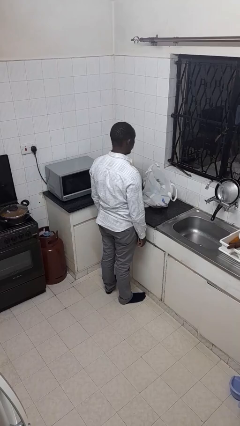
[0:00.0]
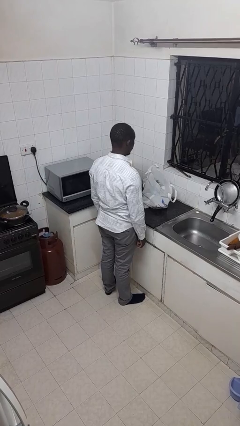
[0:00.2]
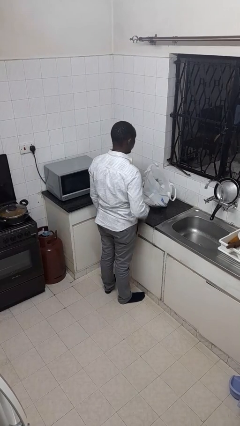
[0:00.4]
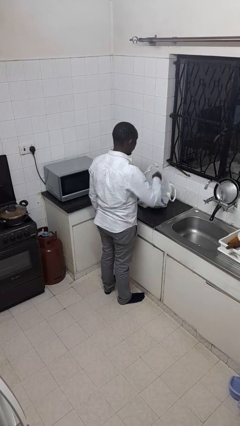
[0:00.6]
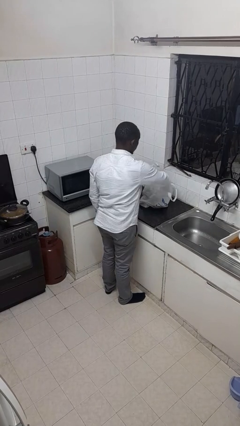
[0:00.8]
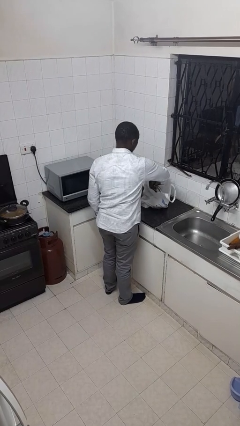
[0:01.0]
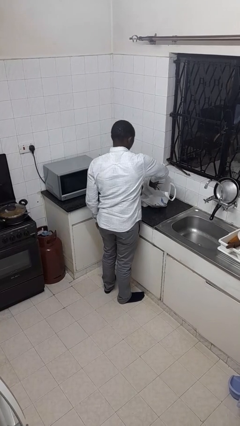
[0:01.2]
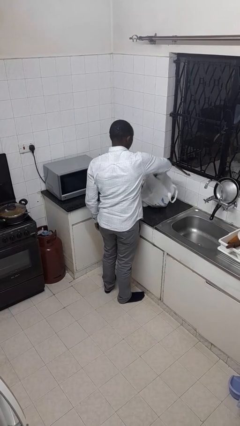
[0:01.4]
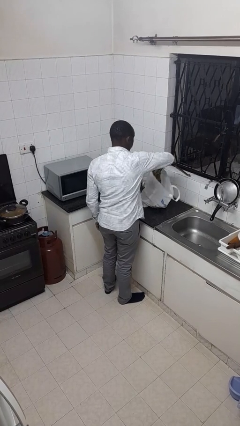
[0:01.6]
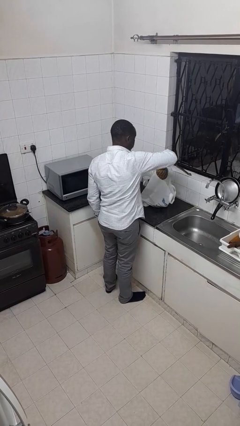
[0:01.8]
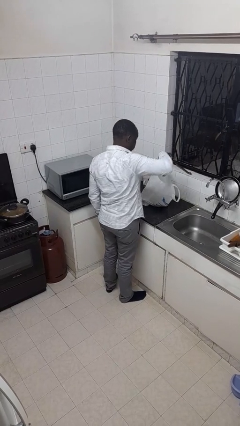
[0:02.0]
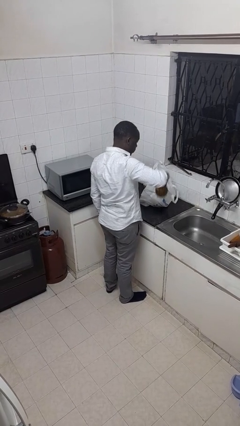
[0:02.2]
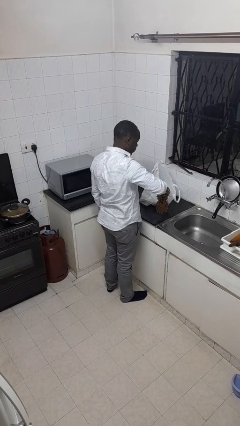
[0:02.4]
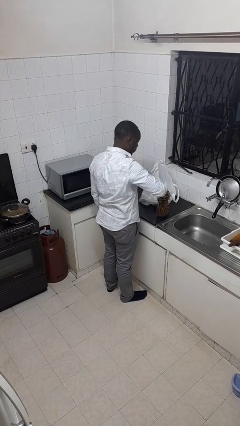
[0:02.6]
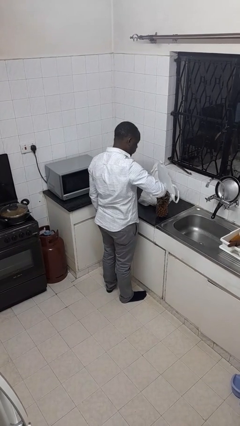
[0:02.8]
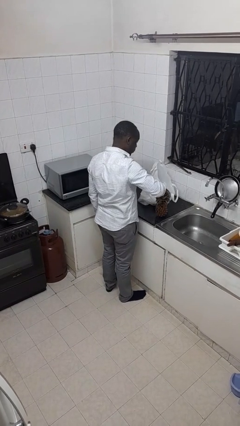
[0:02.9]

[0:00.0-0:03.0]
person takes object from bag

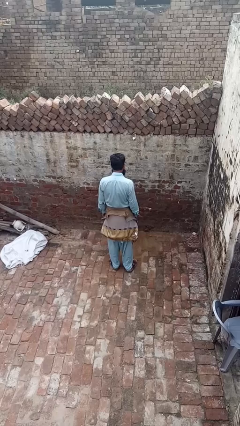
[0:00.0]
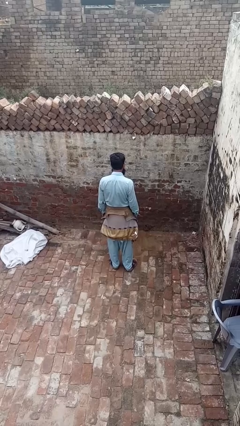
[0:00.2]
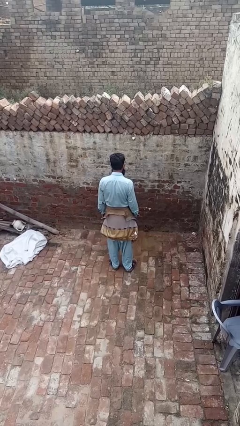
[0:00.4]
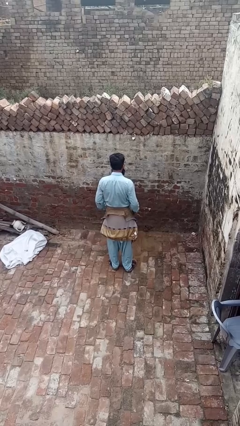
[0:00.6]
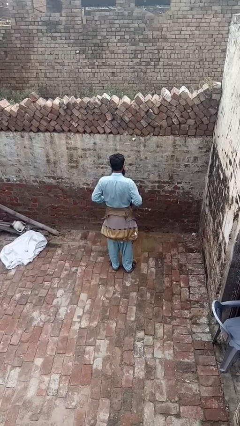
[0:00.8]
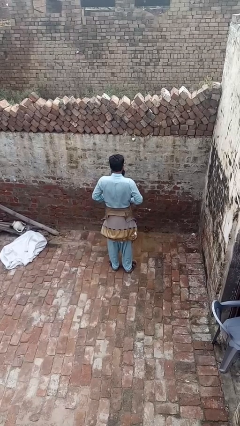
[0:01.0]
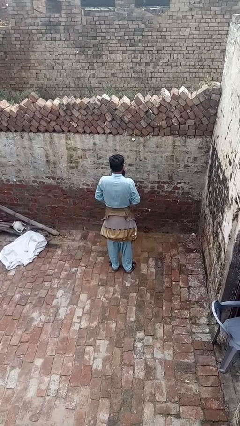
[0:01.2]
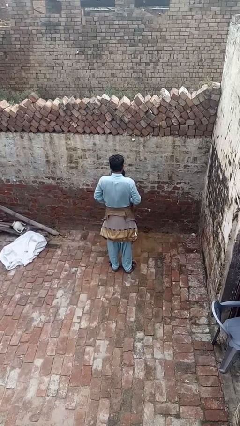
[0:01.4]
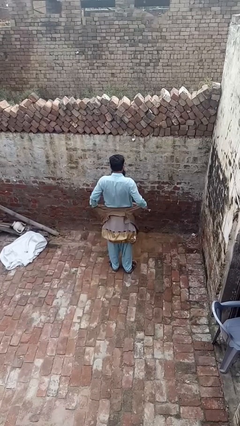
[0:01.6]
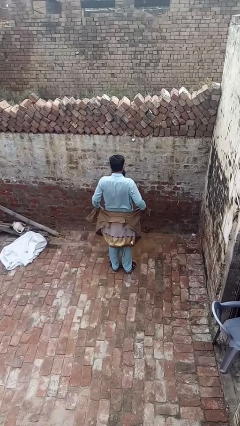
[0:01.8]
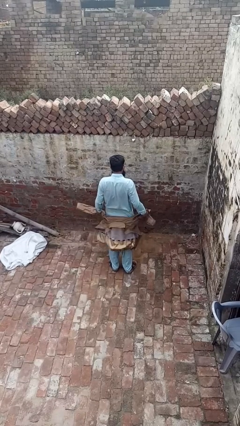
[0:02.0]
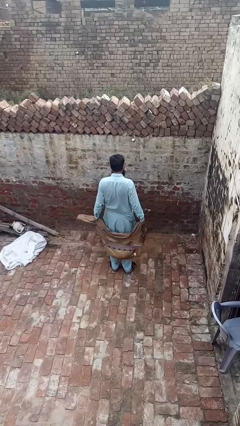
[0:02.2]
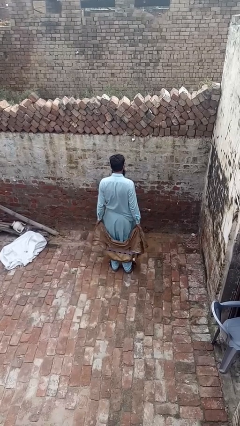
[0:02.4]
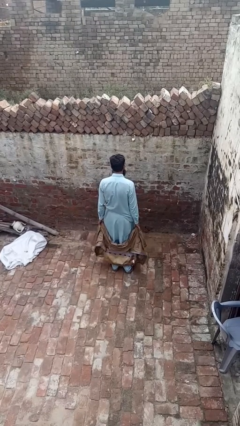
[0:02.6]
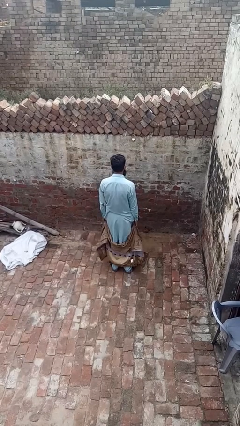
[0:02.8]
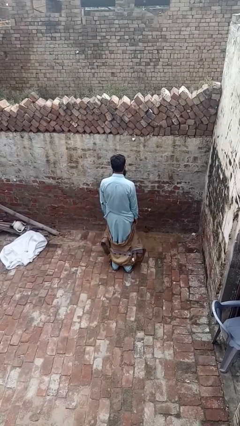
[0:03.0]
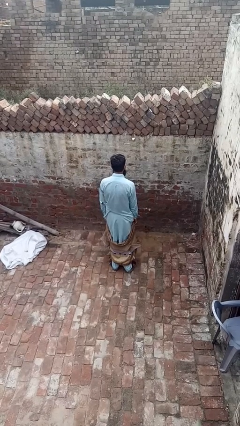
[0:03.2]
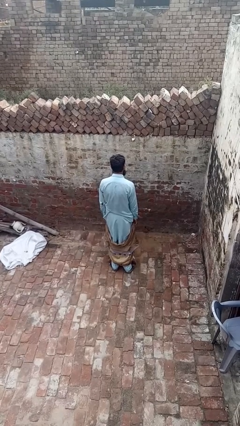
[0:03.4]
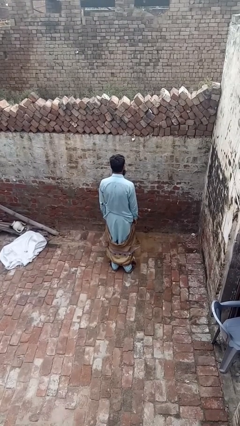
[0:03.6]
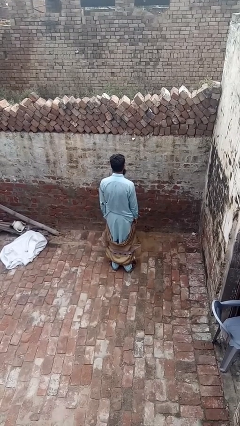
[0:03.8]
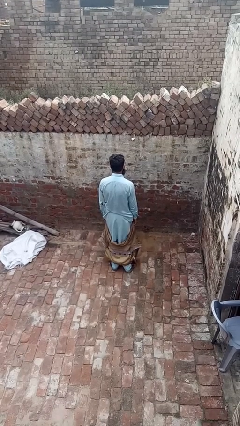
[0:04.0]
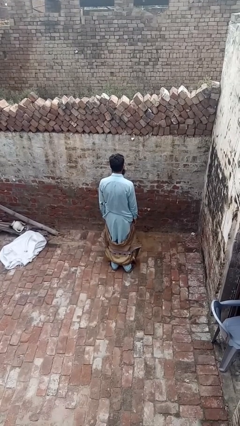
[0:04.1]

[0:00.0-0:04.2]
person unties jacket around waist

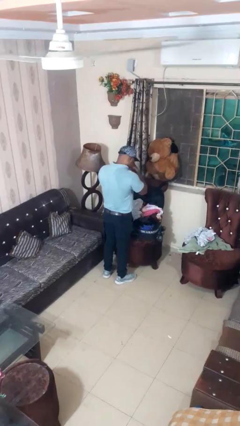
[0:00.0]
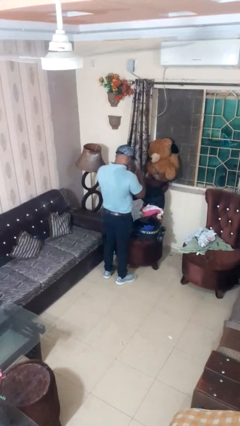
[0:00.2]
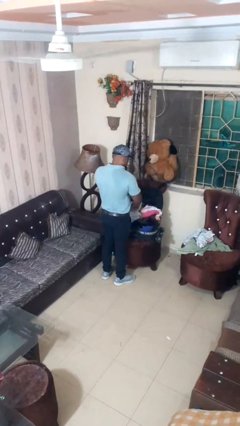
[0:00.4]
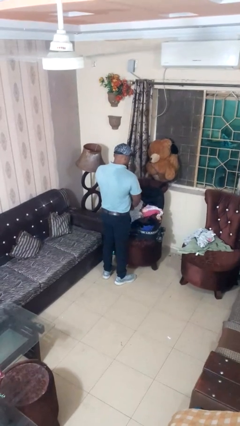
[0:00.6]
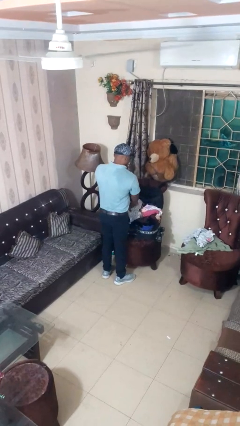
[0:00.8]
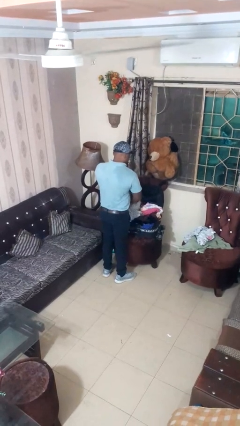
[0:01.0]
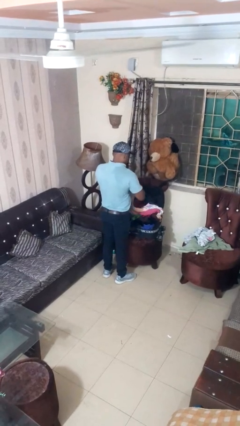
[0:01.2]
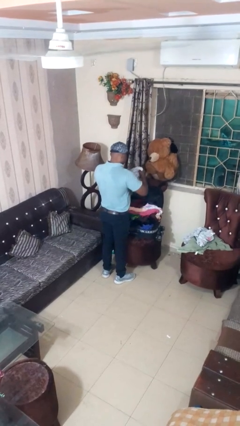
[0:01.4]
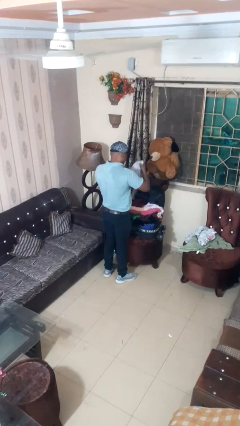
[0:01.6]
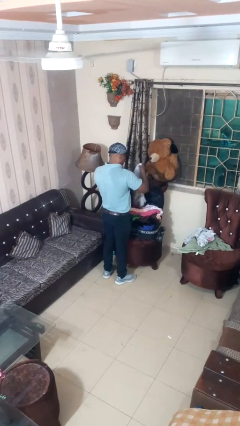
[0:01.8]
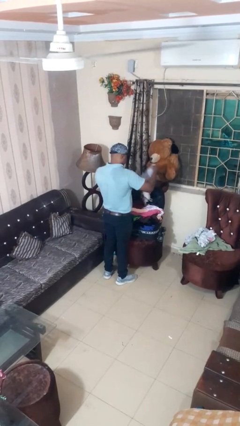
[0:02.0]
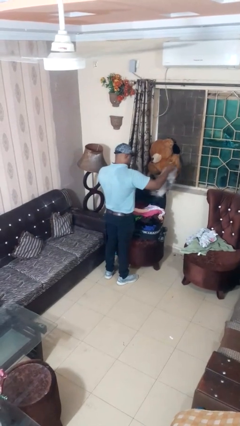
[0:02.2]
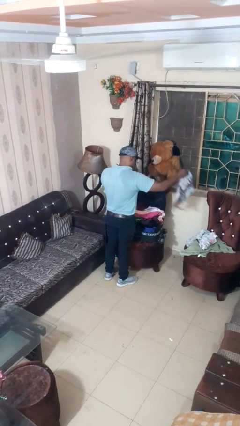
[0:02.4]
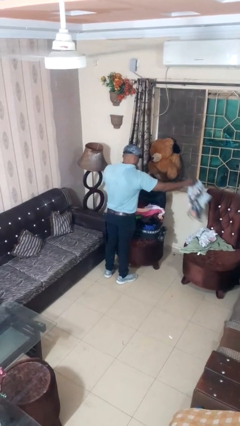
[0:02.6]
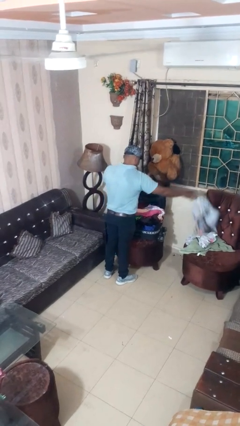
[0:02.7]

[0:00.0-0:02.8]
person unloads clothes from suitcase

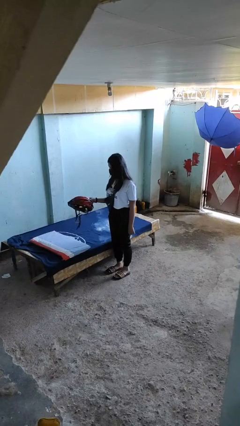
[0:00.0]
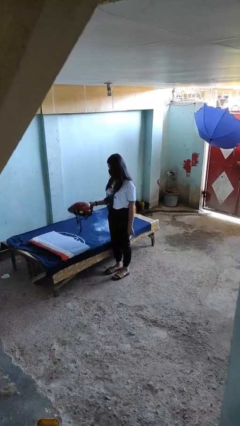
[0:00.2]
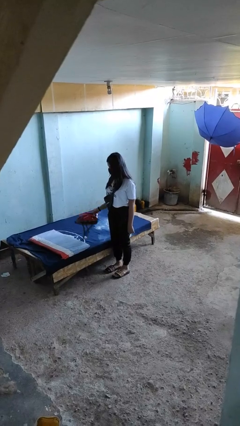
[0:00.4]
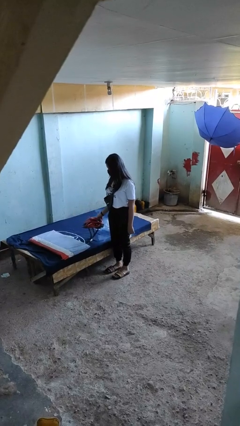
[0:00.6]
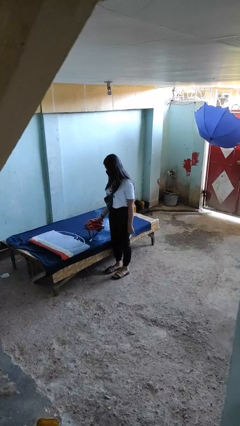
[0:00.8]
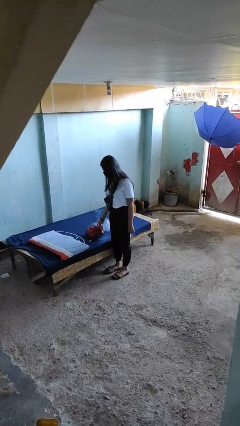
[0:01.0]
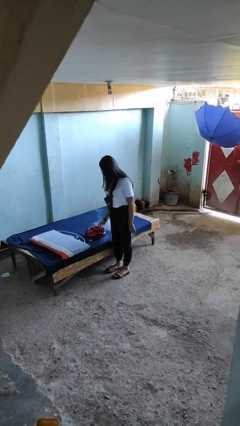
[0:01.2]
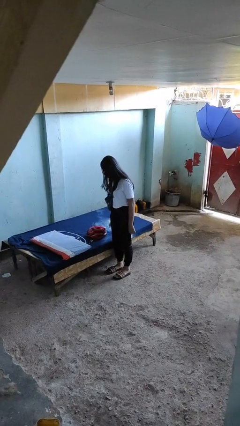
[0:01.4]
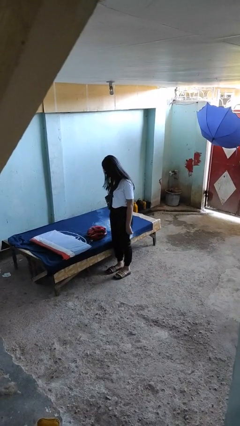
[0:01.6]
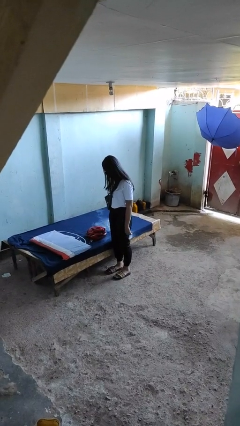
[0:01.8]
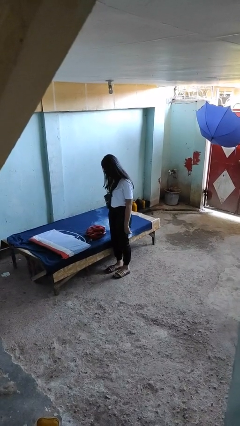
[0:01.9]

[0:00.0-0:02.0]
person puts down object on bed

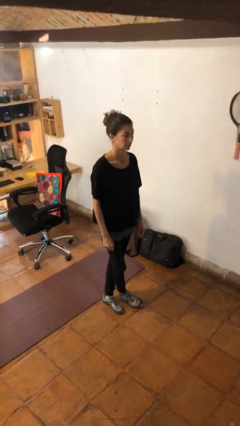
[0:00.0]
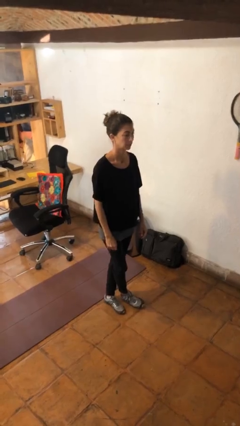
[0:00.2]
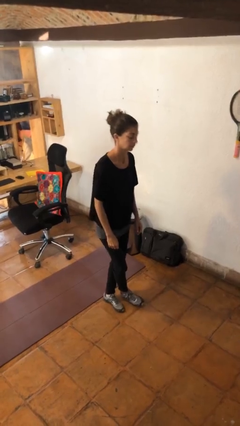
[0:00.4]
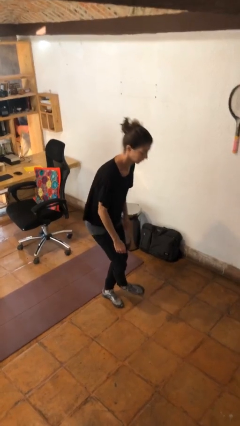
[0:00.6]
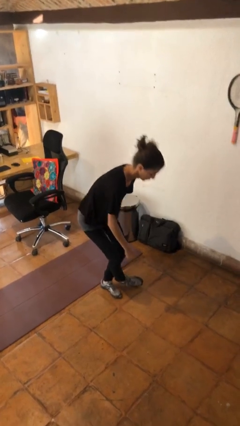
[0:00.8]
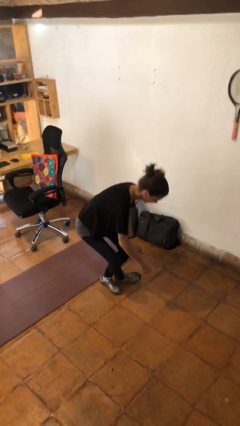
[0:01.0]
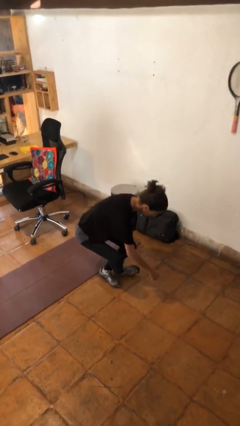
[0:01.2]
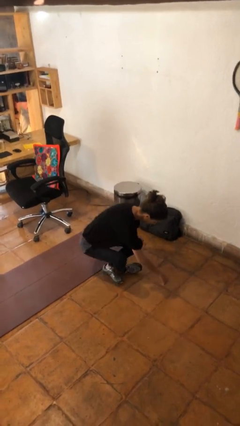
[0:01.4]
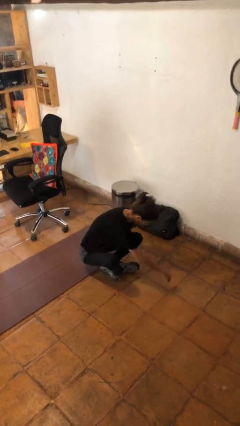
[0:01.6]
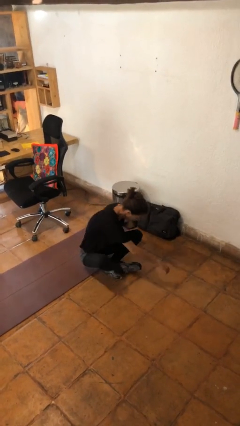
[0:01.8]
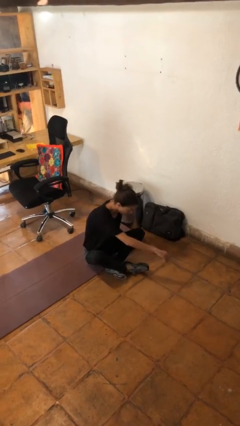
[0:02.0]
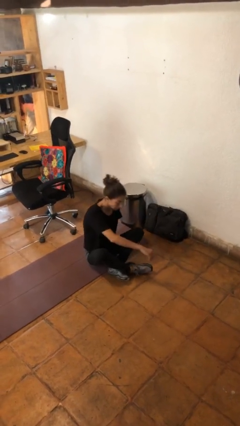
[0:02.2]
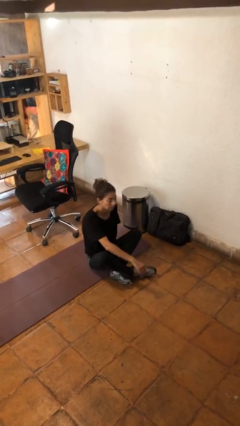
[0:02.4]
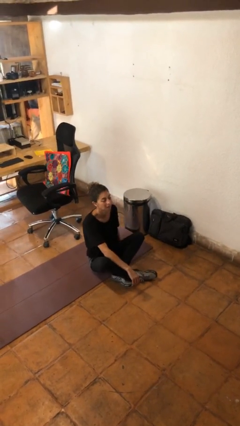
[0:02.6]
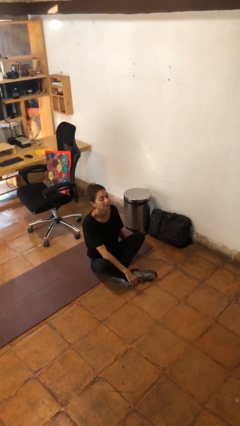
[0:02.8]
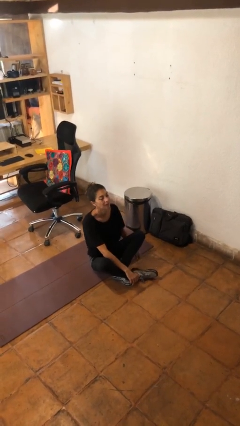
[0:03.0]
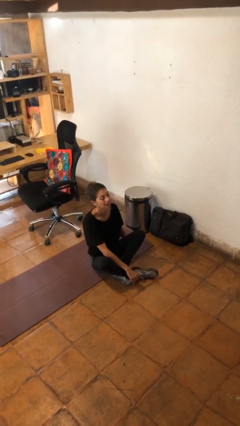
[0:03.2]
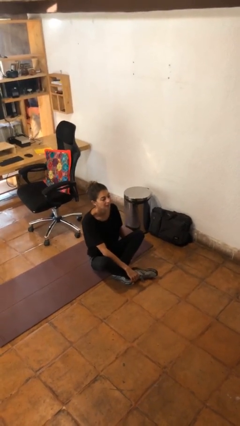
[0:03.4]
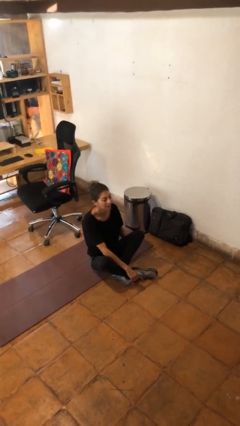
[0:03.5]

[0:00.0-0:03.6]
person sits crisscross

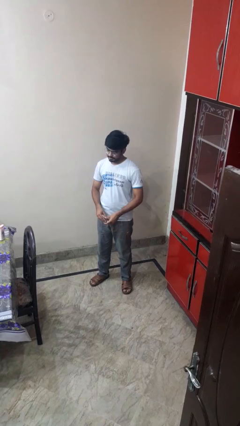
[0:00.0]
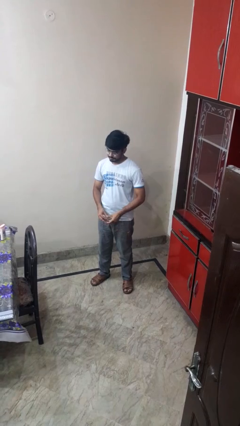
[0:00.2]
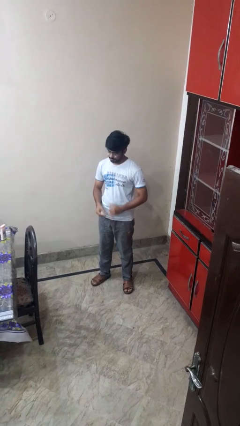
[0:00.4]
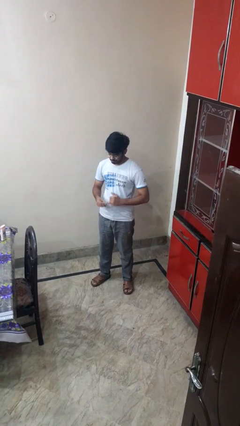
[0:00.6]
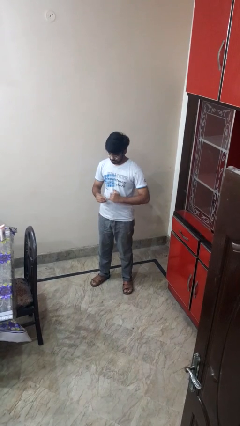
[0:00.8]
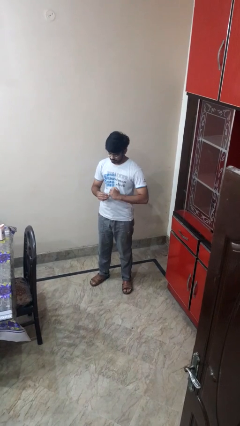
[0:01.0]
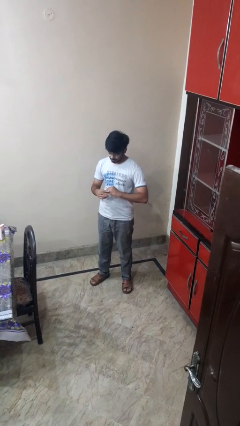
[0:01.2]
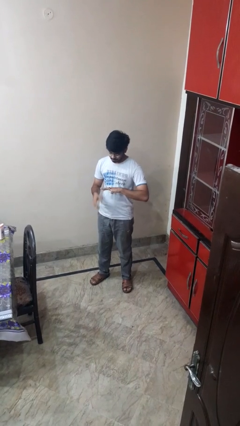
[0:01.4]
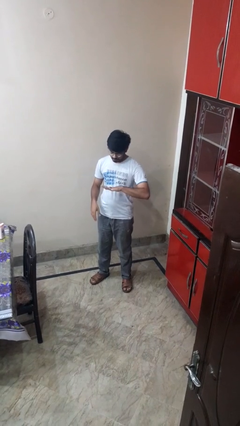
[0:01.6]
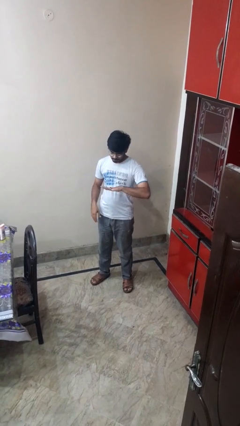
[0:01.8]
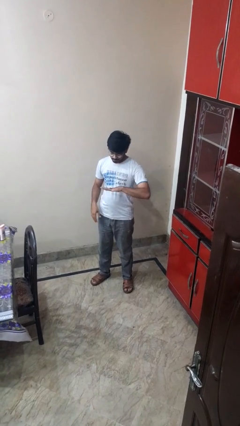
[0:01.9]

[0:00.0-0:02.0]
person puts on ring

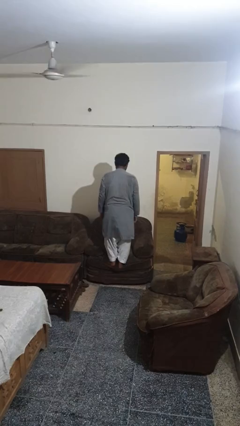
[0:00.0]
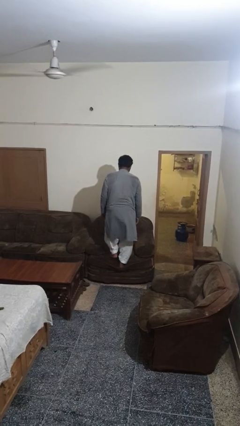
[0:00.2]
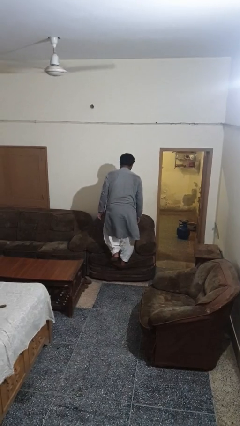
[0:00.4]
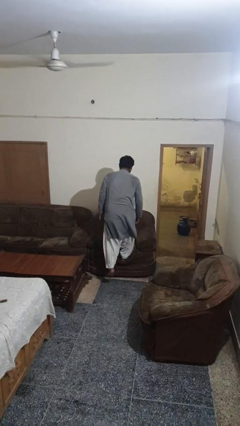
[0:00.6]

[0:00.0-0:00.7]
person climbs off couch
